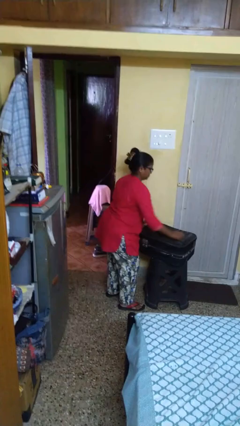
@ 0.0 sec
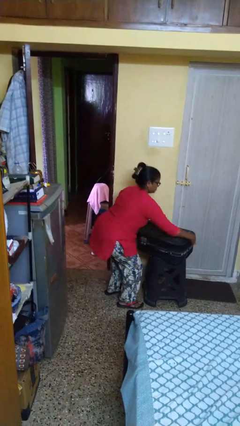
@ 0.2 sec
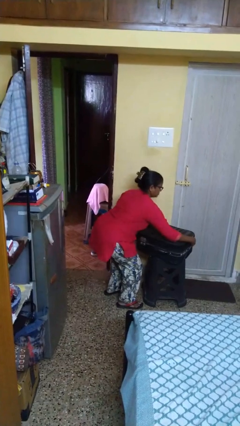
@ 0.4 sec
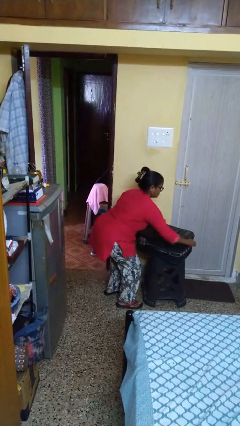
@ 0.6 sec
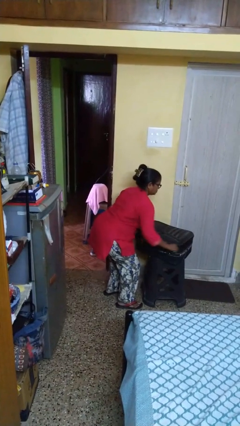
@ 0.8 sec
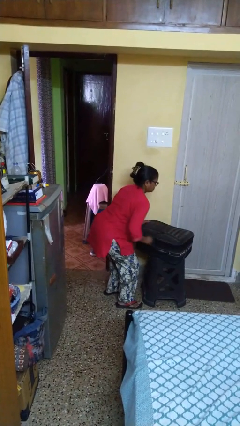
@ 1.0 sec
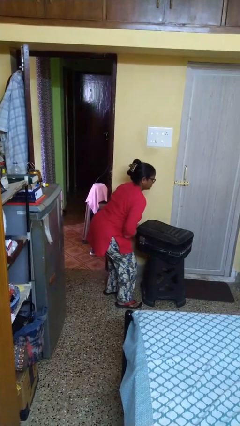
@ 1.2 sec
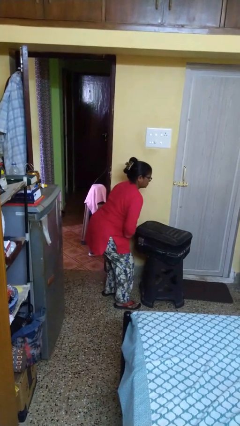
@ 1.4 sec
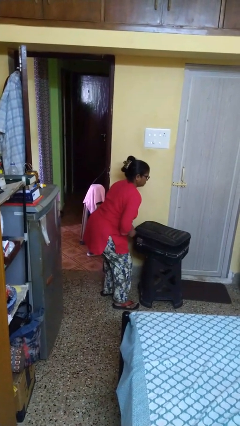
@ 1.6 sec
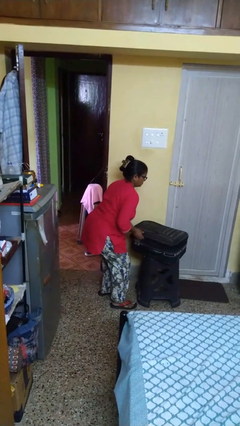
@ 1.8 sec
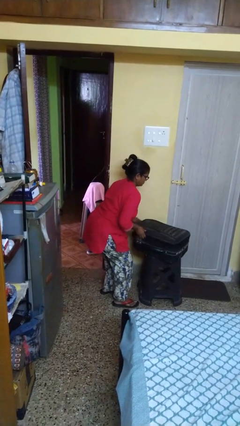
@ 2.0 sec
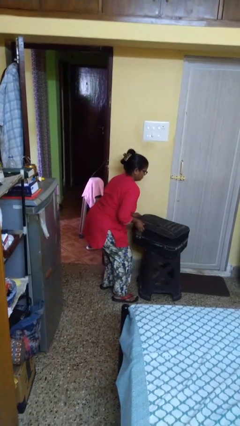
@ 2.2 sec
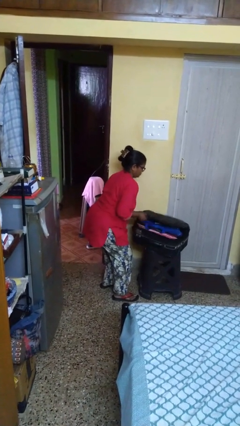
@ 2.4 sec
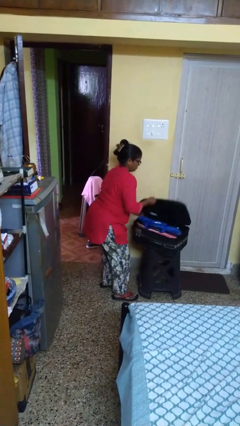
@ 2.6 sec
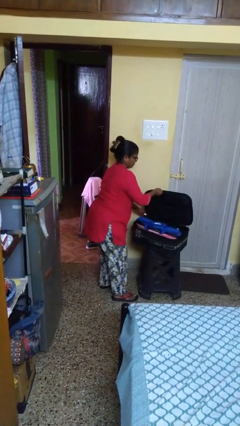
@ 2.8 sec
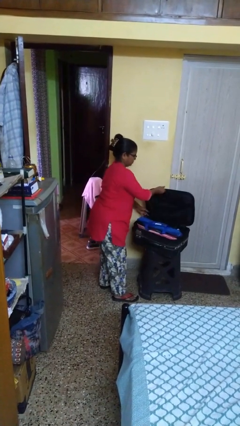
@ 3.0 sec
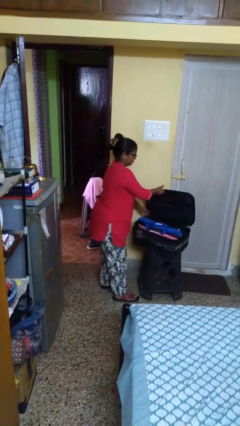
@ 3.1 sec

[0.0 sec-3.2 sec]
person opens suitcase

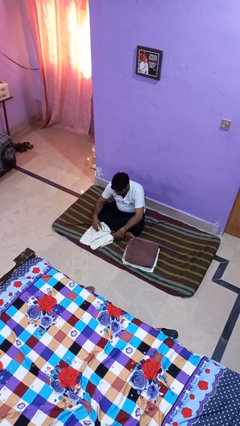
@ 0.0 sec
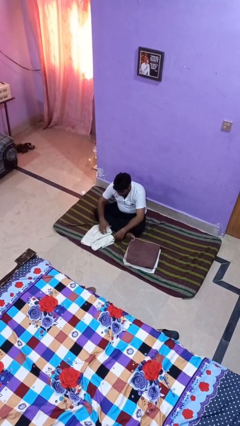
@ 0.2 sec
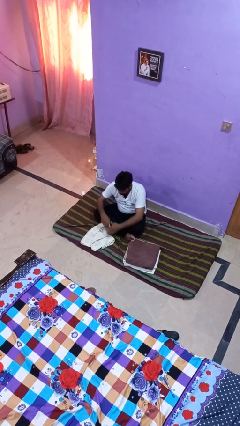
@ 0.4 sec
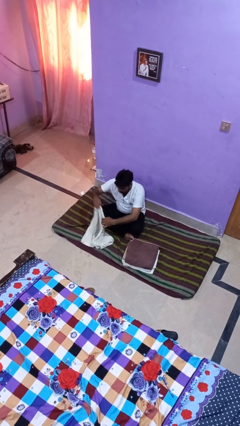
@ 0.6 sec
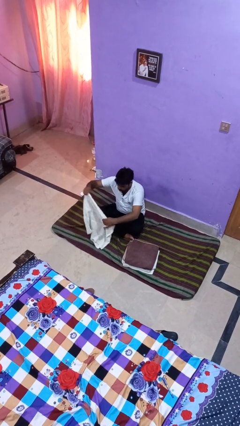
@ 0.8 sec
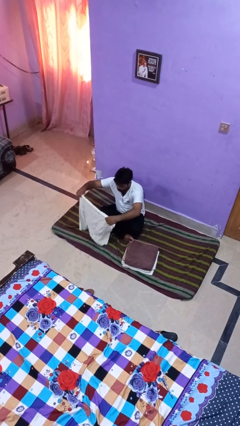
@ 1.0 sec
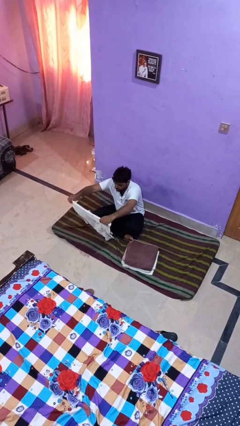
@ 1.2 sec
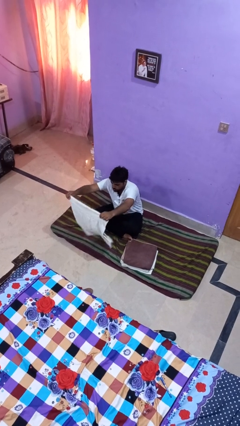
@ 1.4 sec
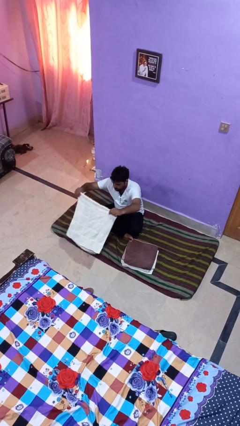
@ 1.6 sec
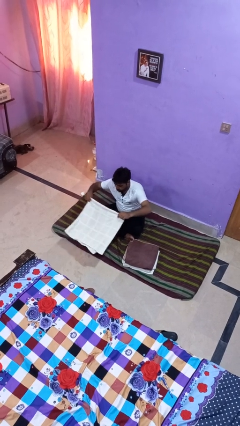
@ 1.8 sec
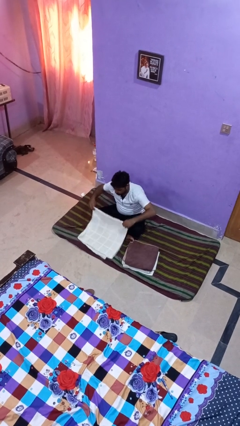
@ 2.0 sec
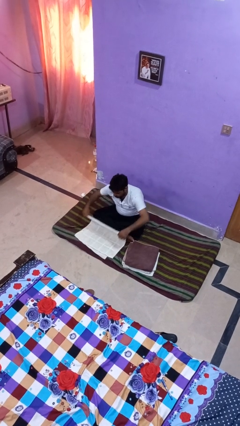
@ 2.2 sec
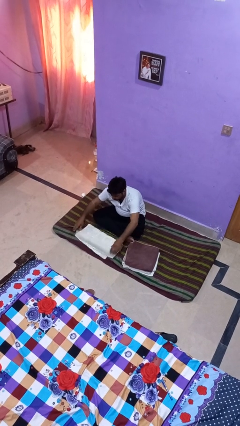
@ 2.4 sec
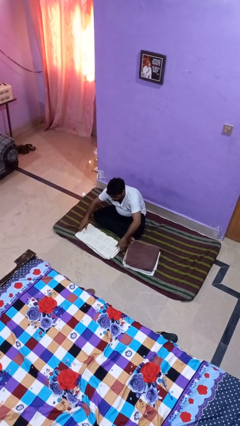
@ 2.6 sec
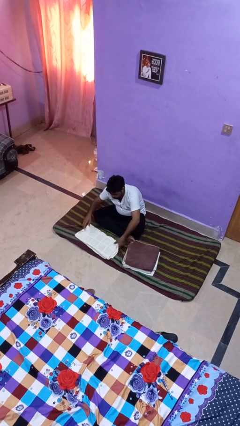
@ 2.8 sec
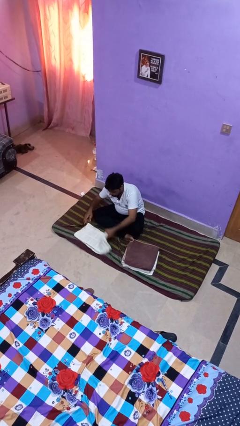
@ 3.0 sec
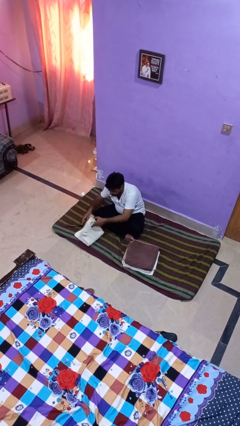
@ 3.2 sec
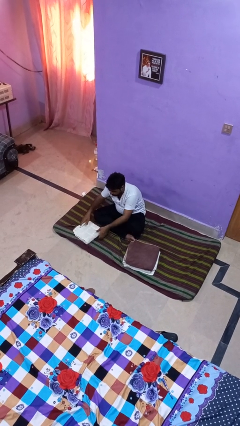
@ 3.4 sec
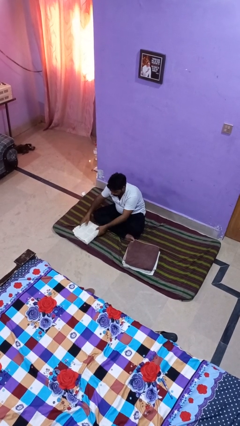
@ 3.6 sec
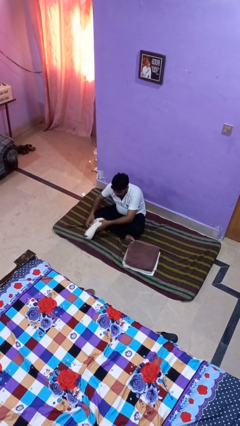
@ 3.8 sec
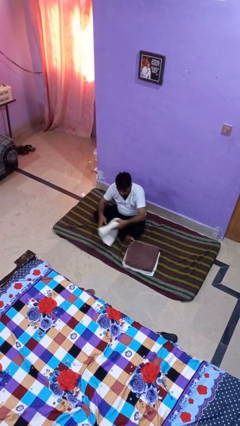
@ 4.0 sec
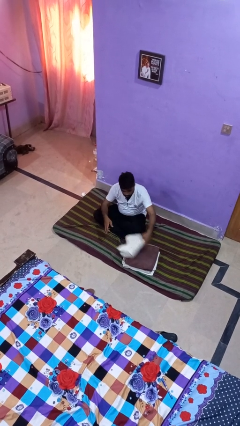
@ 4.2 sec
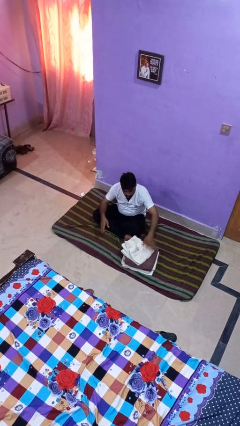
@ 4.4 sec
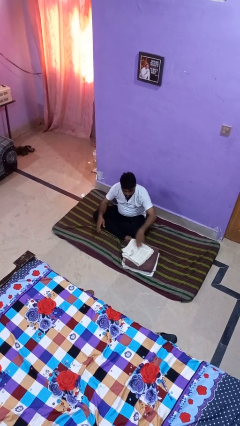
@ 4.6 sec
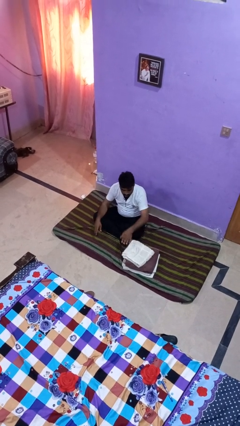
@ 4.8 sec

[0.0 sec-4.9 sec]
person folds towel

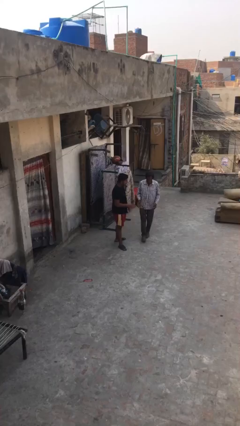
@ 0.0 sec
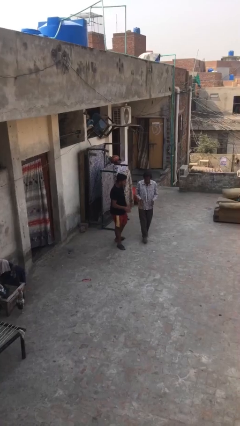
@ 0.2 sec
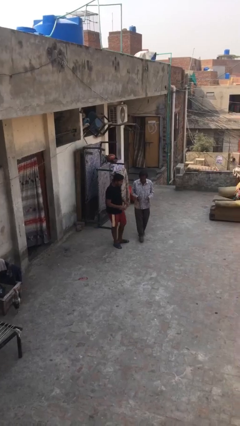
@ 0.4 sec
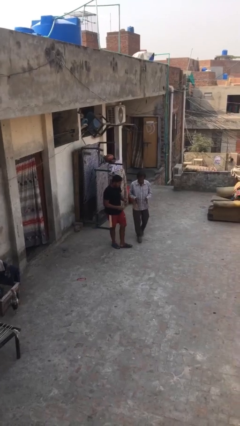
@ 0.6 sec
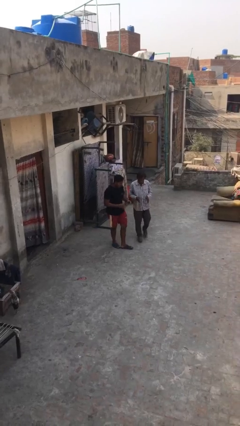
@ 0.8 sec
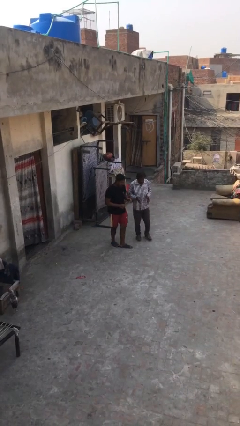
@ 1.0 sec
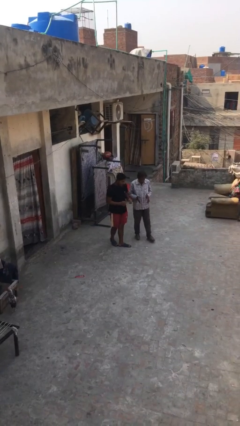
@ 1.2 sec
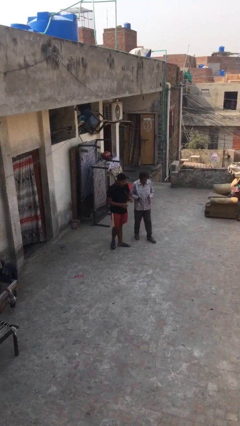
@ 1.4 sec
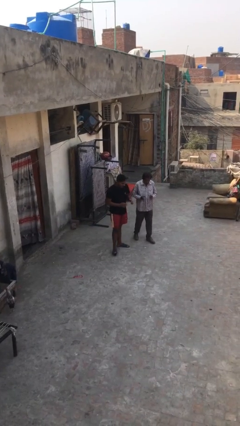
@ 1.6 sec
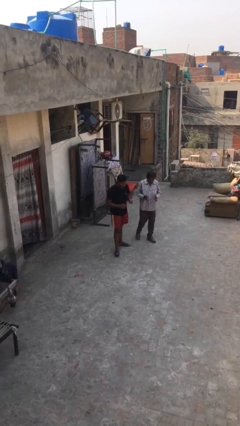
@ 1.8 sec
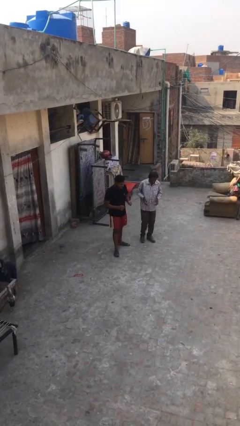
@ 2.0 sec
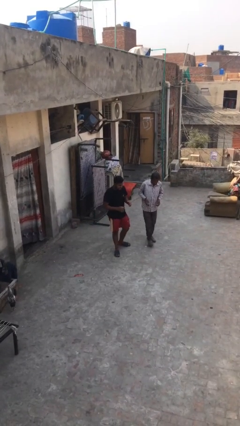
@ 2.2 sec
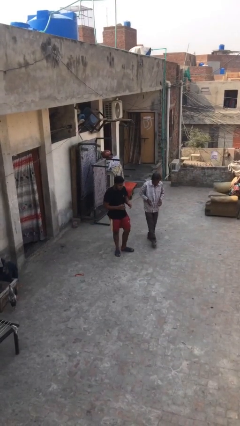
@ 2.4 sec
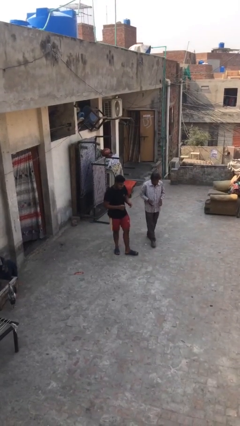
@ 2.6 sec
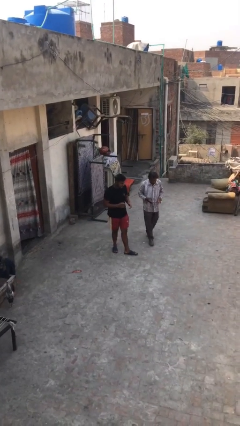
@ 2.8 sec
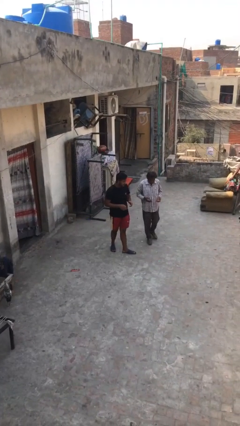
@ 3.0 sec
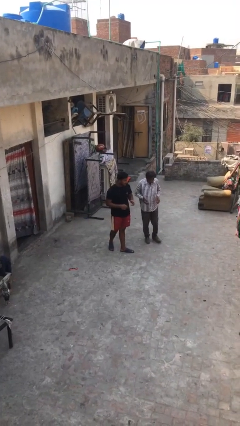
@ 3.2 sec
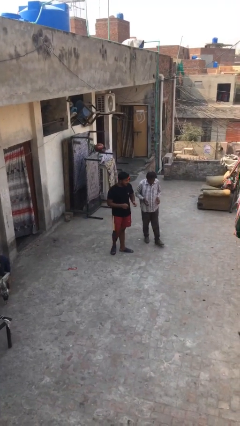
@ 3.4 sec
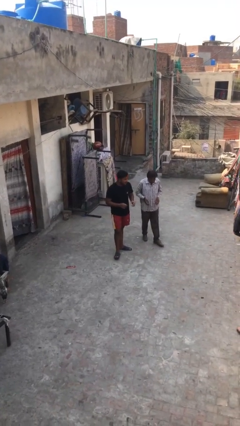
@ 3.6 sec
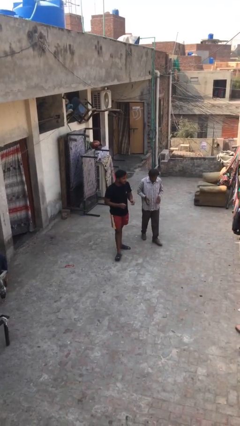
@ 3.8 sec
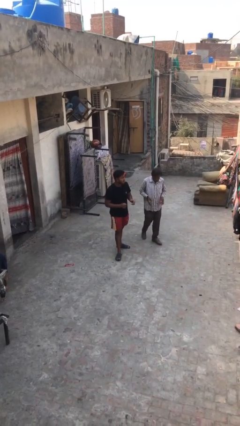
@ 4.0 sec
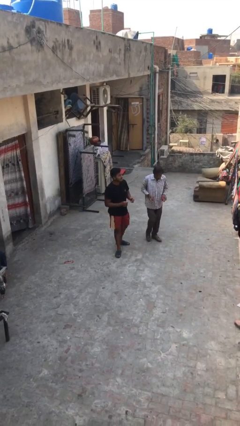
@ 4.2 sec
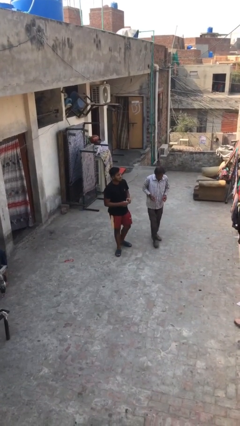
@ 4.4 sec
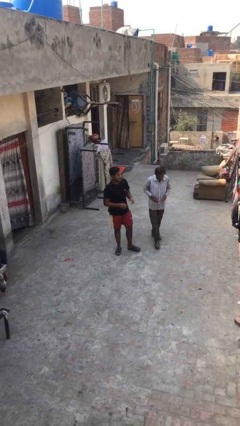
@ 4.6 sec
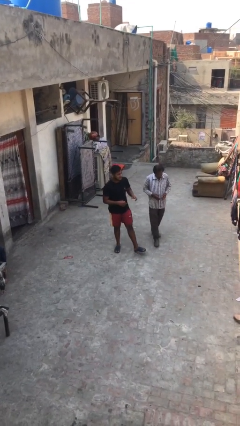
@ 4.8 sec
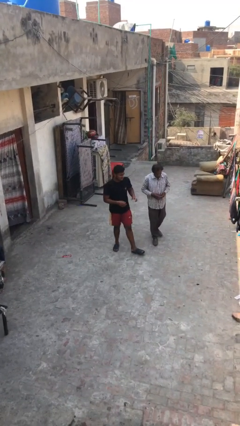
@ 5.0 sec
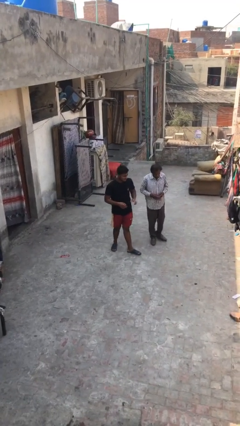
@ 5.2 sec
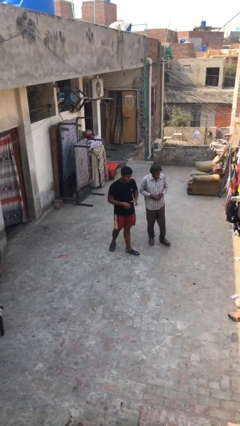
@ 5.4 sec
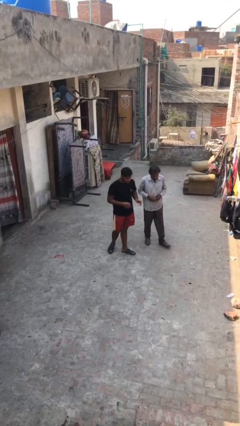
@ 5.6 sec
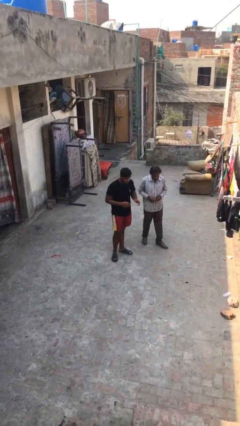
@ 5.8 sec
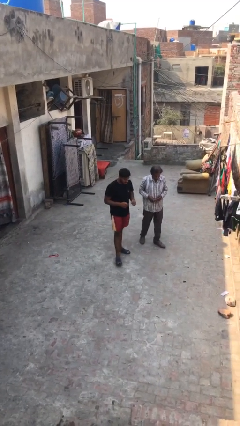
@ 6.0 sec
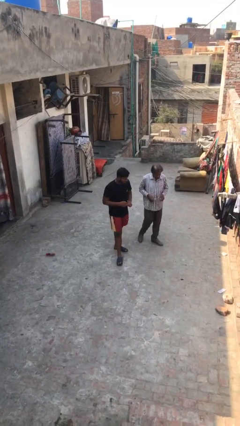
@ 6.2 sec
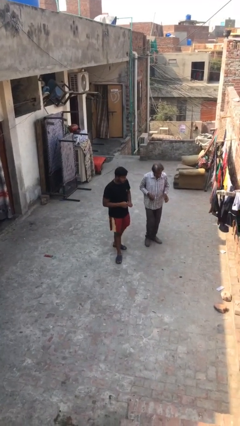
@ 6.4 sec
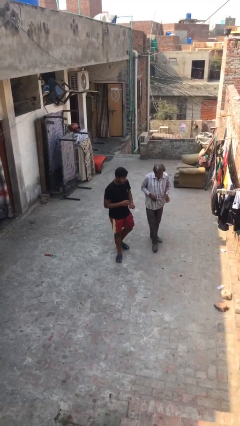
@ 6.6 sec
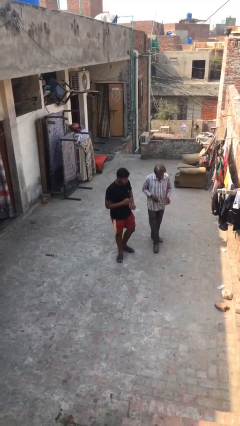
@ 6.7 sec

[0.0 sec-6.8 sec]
person talks to person

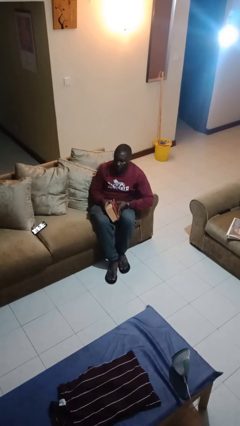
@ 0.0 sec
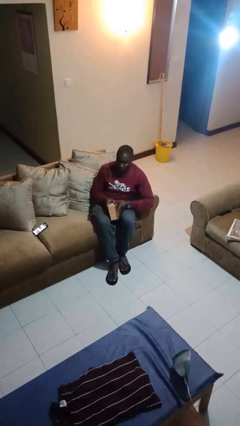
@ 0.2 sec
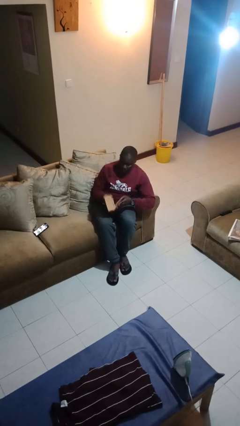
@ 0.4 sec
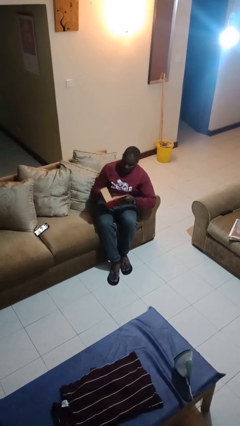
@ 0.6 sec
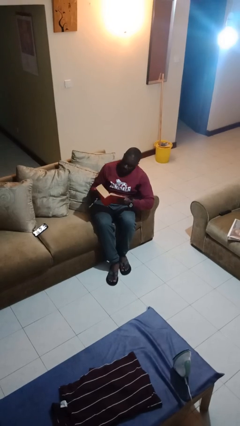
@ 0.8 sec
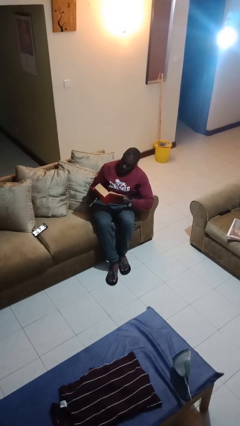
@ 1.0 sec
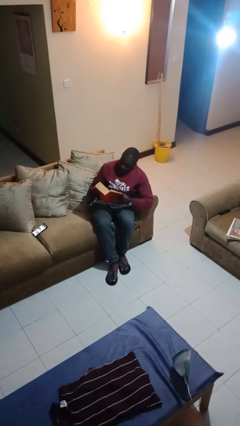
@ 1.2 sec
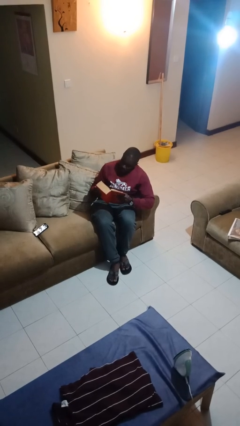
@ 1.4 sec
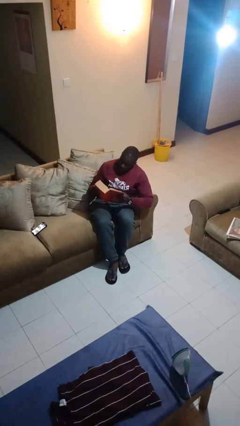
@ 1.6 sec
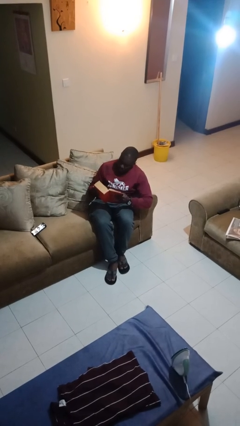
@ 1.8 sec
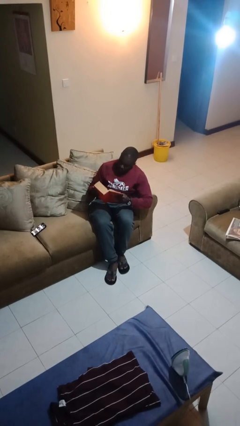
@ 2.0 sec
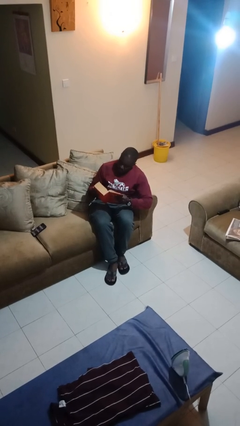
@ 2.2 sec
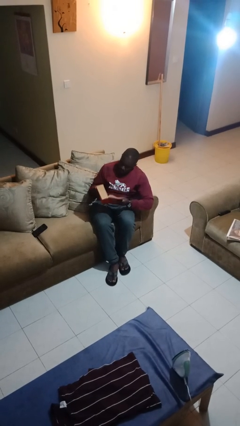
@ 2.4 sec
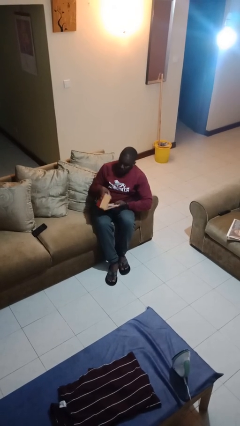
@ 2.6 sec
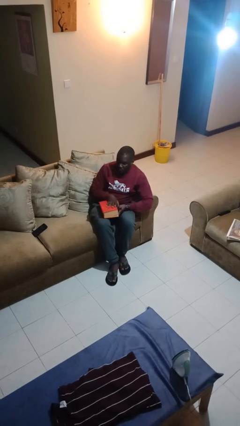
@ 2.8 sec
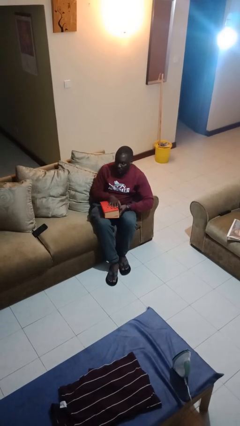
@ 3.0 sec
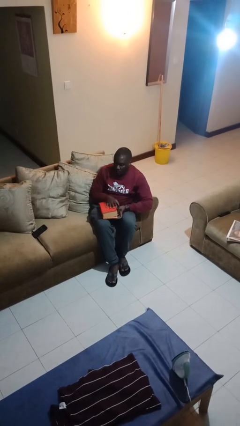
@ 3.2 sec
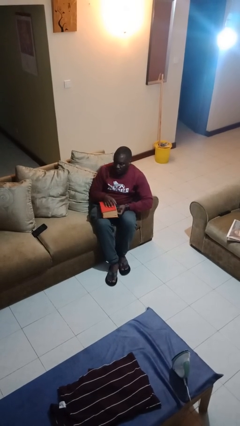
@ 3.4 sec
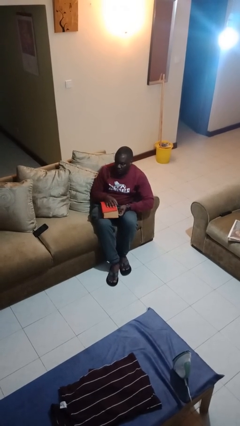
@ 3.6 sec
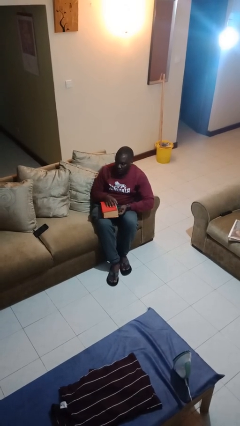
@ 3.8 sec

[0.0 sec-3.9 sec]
person reads book
